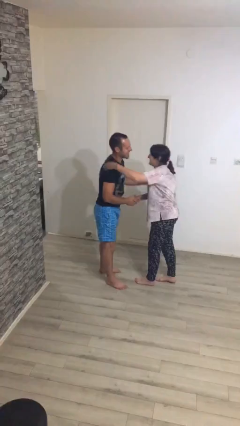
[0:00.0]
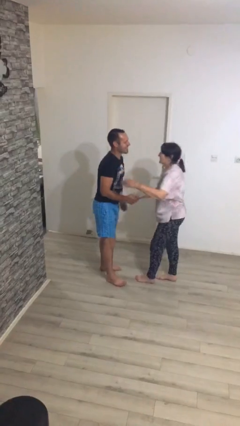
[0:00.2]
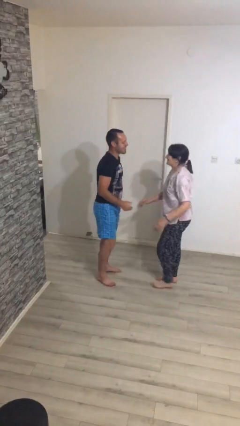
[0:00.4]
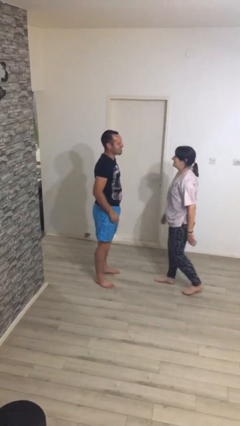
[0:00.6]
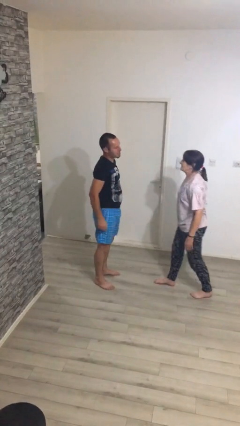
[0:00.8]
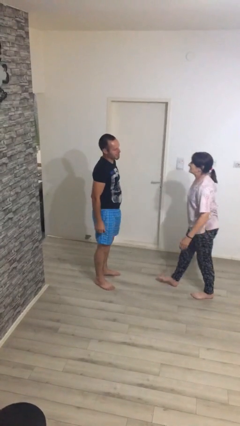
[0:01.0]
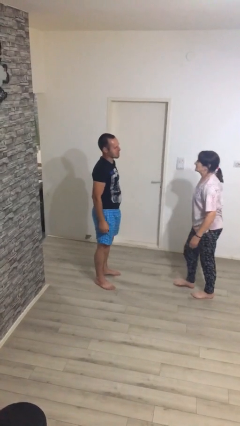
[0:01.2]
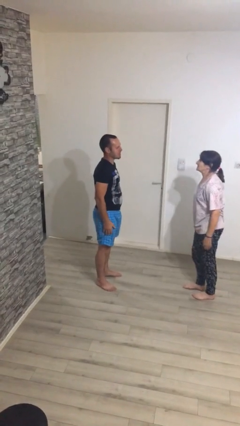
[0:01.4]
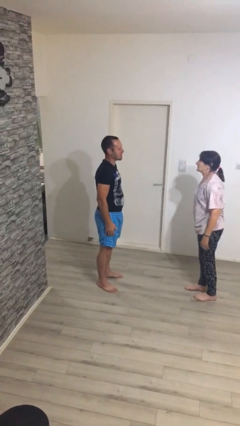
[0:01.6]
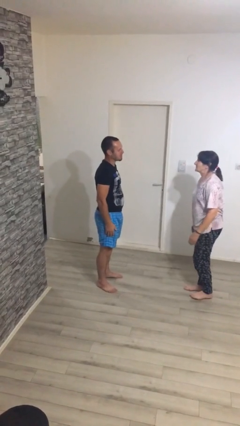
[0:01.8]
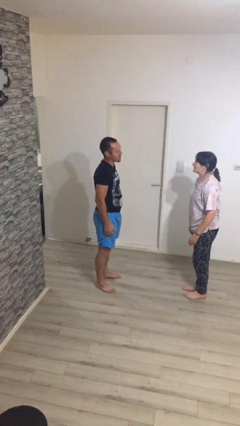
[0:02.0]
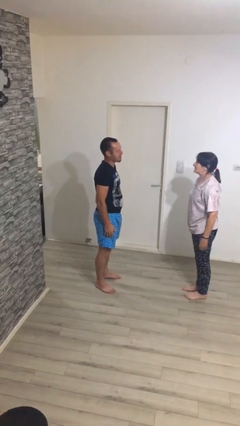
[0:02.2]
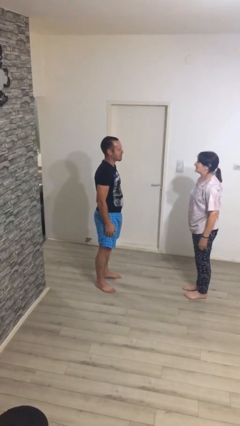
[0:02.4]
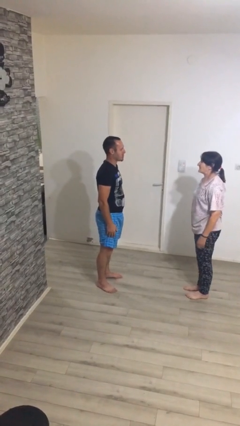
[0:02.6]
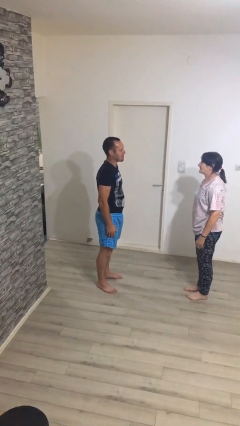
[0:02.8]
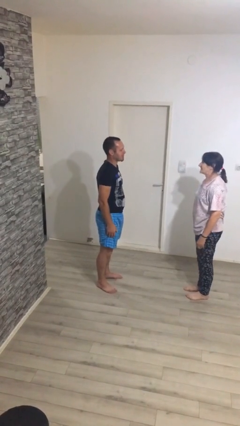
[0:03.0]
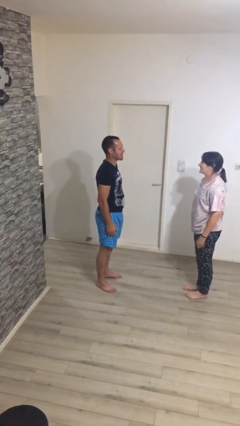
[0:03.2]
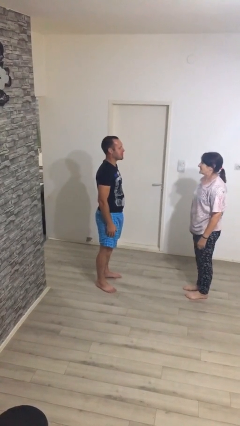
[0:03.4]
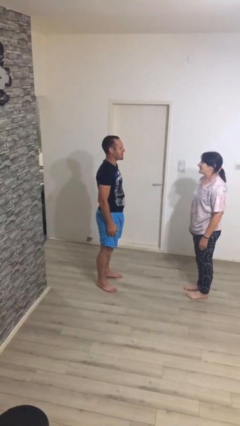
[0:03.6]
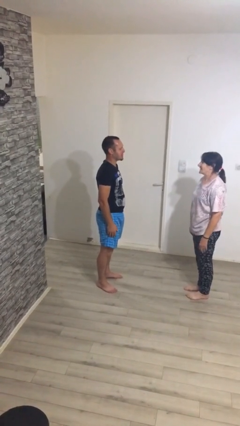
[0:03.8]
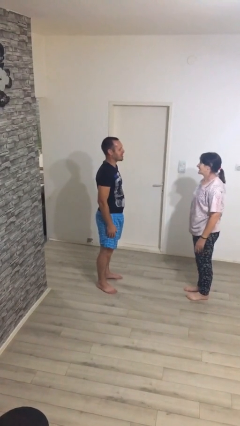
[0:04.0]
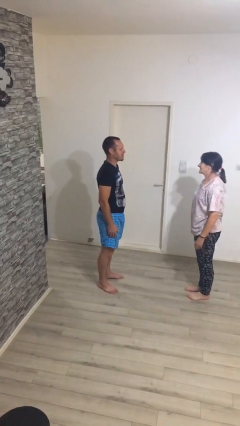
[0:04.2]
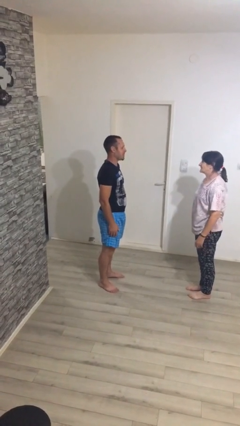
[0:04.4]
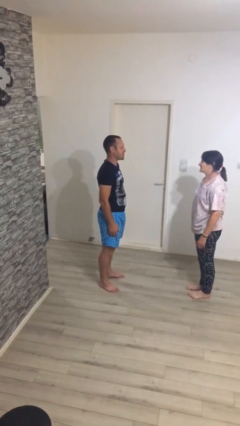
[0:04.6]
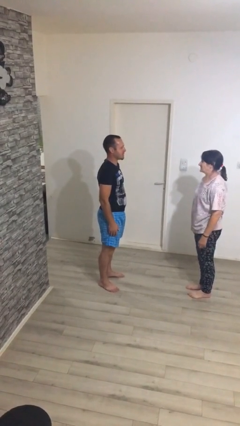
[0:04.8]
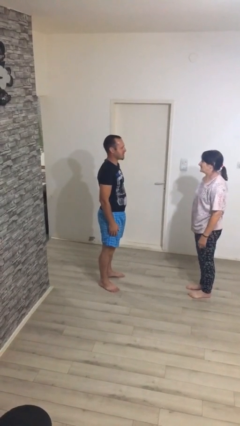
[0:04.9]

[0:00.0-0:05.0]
person talks to person

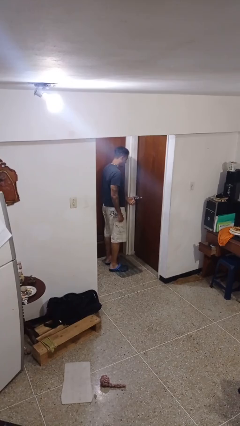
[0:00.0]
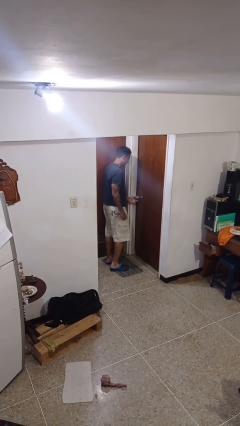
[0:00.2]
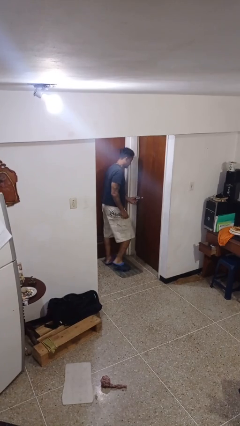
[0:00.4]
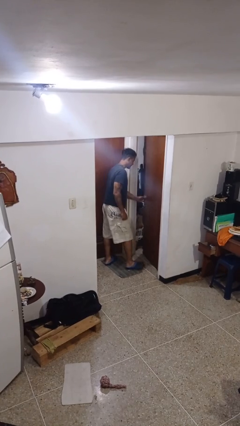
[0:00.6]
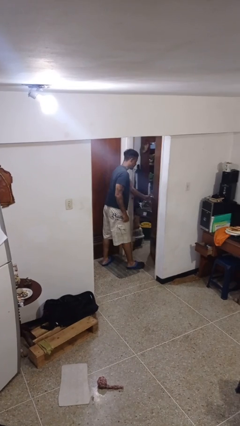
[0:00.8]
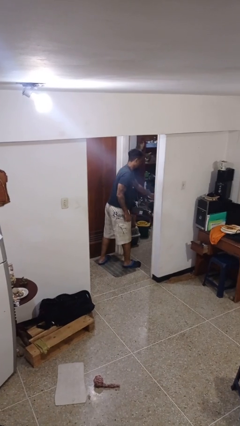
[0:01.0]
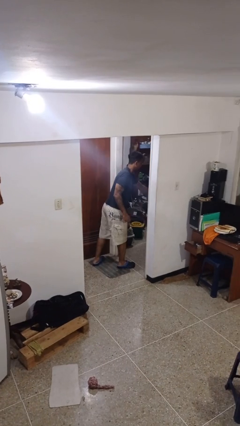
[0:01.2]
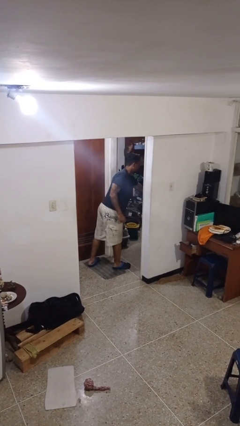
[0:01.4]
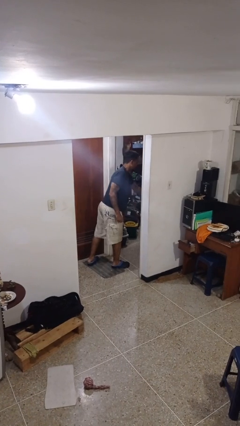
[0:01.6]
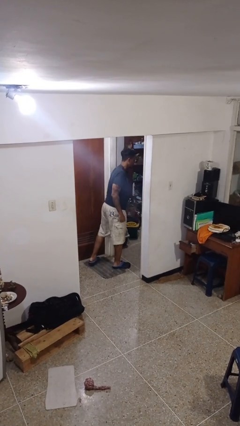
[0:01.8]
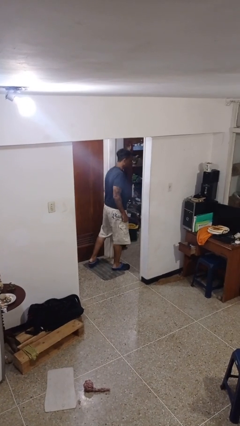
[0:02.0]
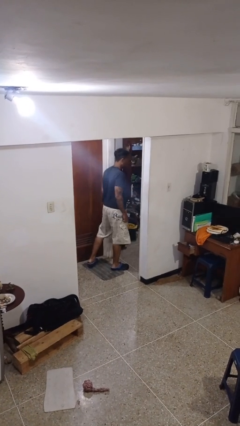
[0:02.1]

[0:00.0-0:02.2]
person opens facility door

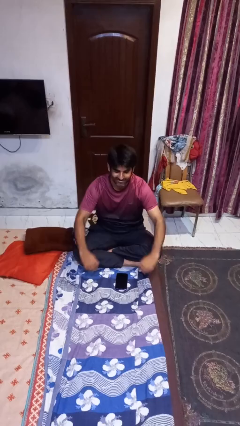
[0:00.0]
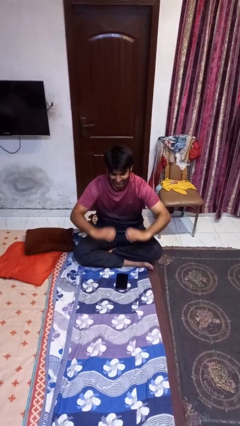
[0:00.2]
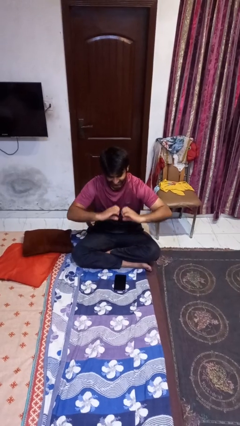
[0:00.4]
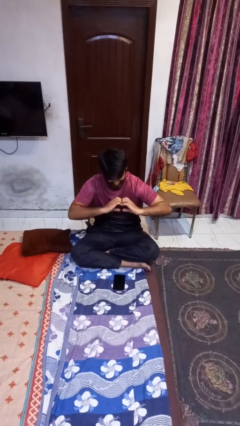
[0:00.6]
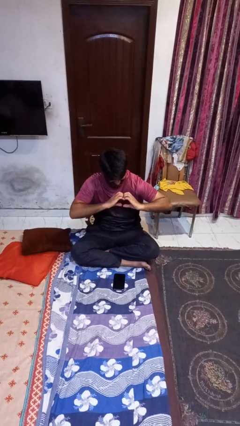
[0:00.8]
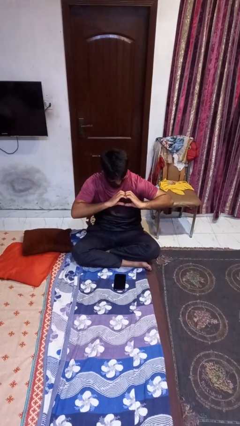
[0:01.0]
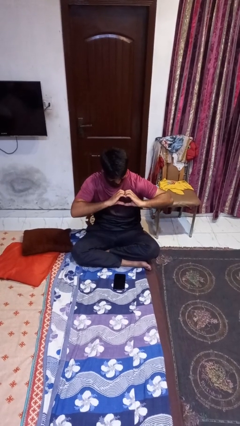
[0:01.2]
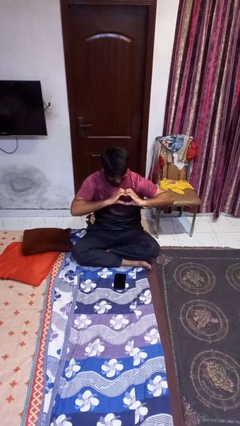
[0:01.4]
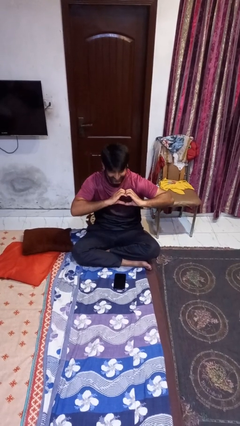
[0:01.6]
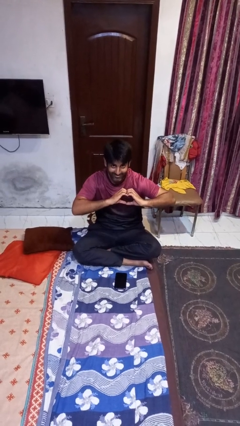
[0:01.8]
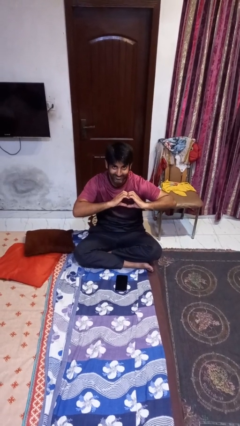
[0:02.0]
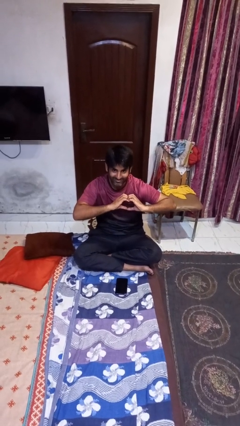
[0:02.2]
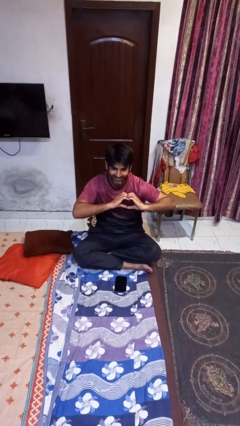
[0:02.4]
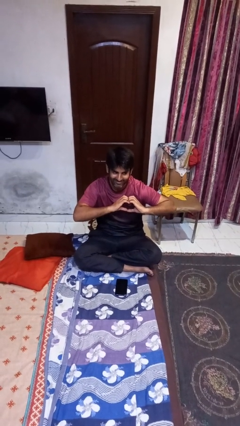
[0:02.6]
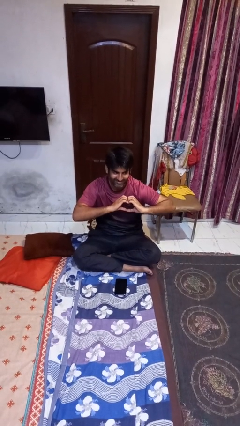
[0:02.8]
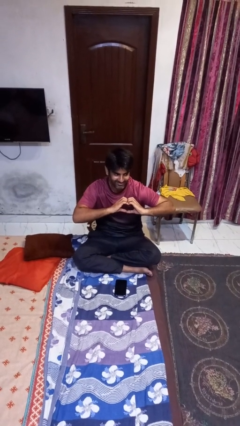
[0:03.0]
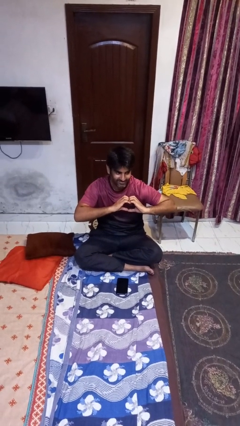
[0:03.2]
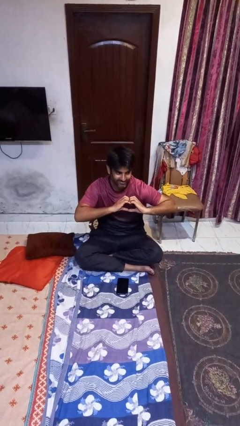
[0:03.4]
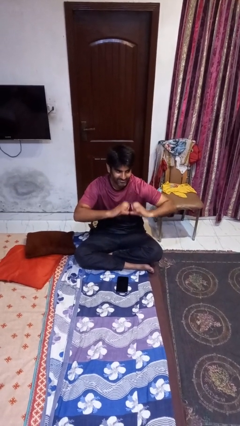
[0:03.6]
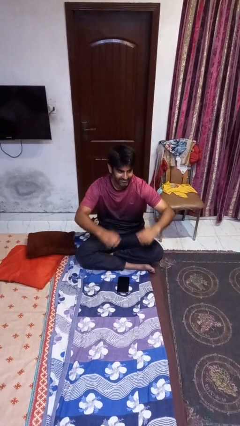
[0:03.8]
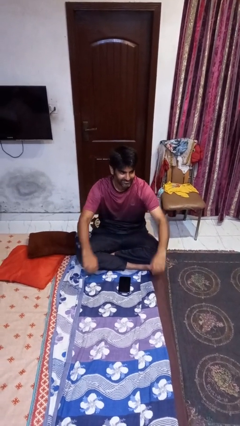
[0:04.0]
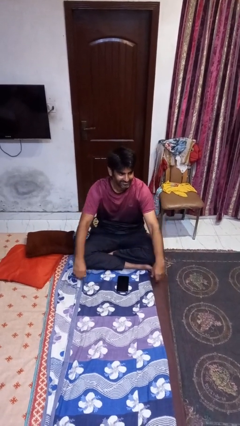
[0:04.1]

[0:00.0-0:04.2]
person gestures heart

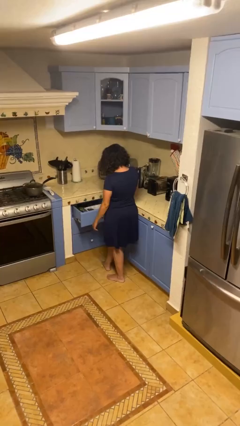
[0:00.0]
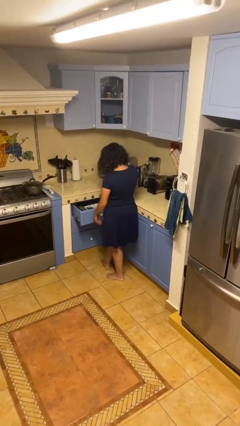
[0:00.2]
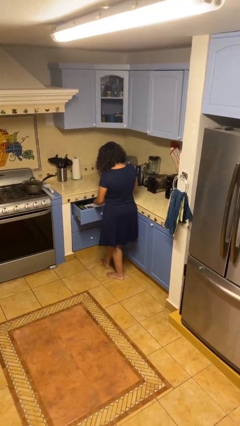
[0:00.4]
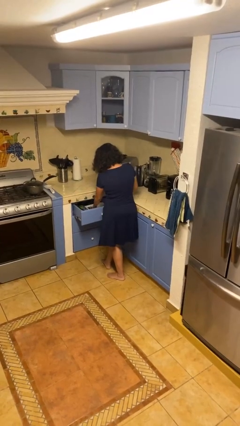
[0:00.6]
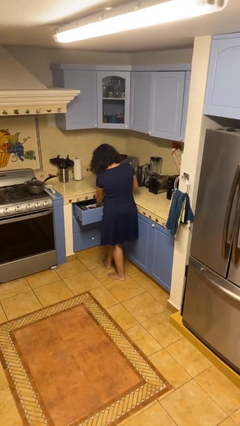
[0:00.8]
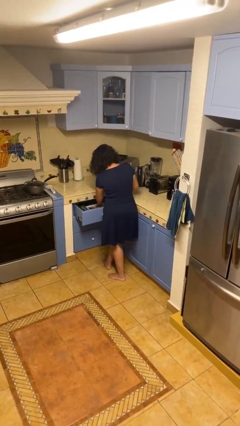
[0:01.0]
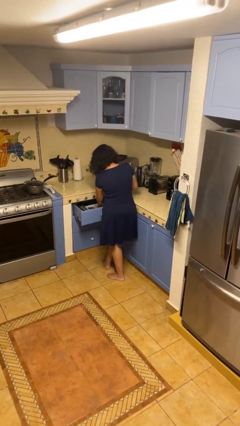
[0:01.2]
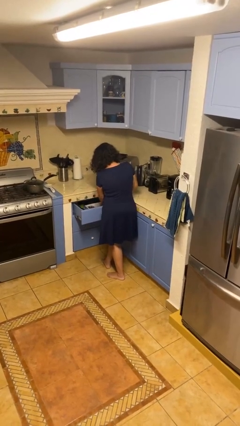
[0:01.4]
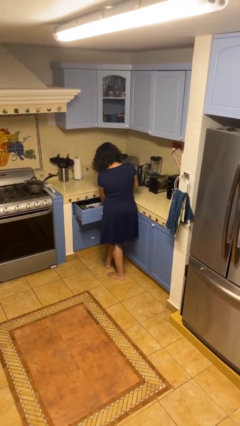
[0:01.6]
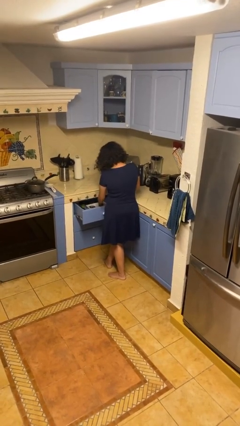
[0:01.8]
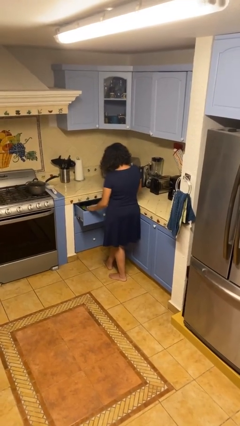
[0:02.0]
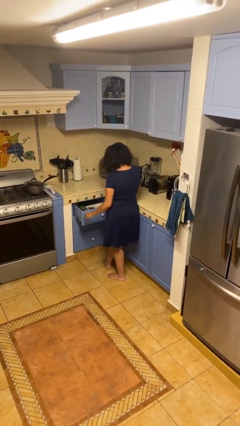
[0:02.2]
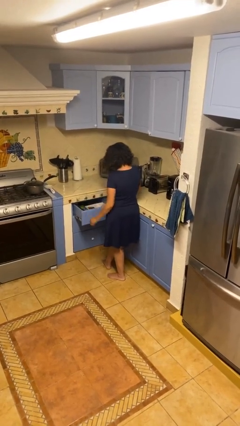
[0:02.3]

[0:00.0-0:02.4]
person searches in kitchen drawer

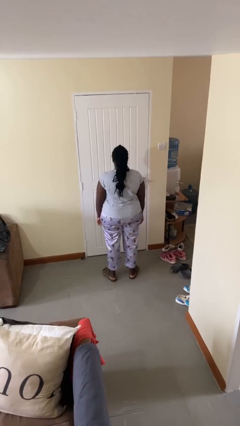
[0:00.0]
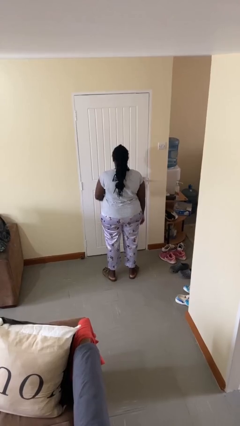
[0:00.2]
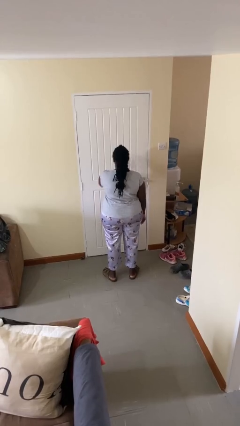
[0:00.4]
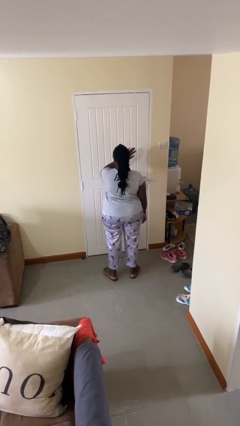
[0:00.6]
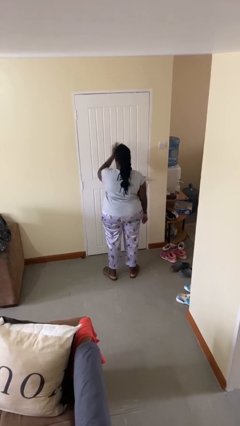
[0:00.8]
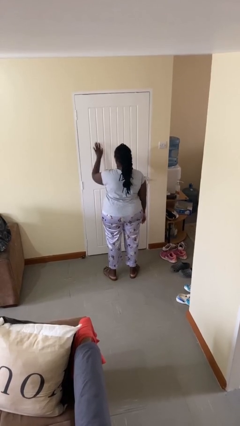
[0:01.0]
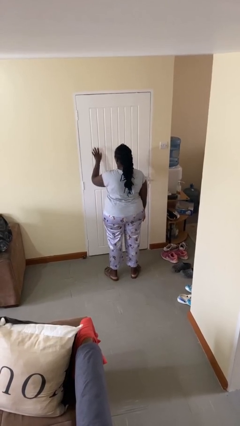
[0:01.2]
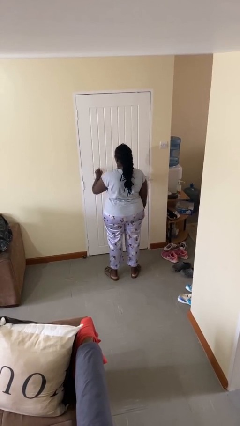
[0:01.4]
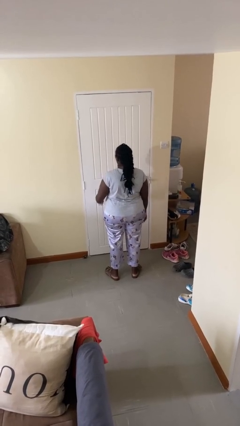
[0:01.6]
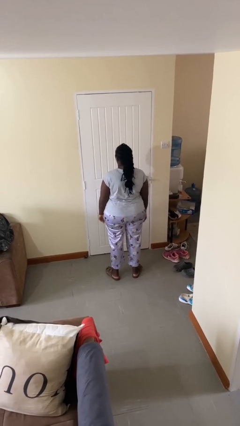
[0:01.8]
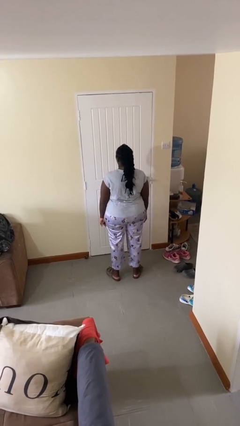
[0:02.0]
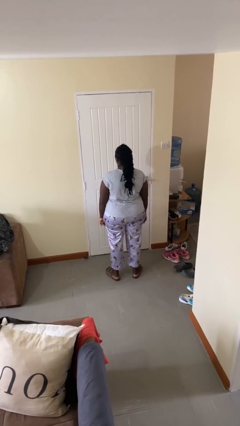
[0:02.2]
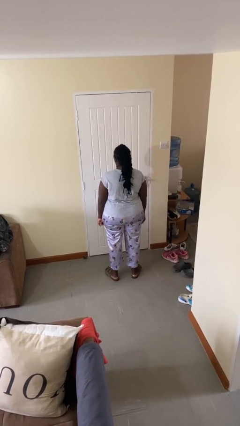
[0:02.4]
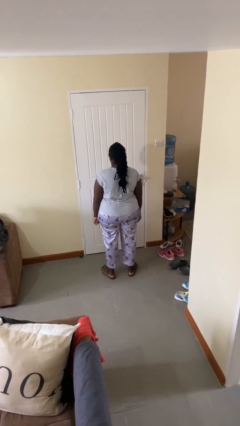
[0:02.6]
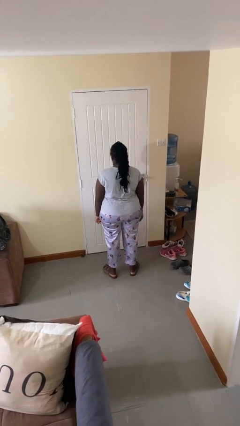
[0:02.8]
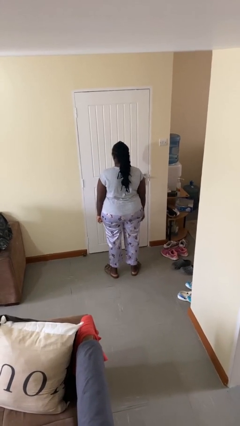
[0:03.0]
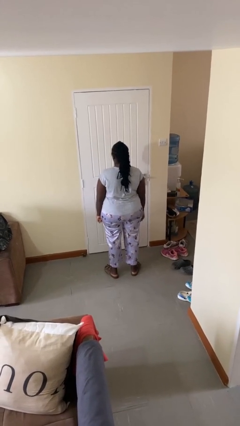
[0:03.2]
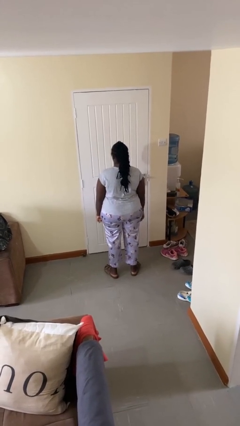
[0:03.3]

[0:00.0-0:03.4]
person gestures swipe left

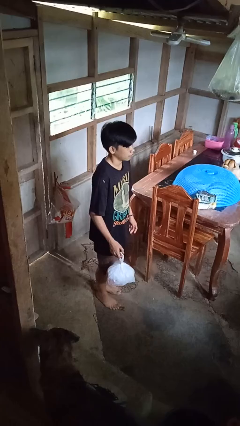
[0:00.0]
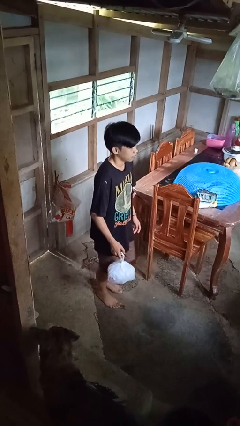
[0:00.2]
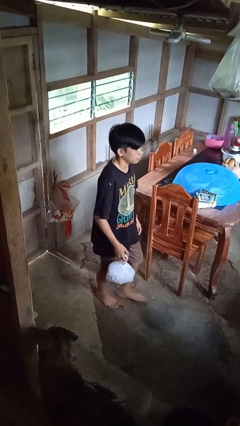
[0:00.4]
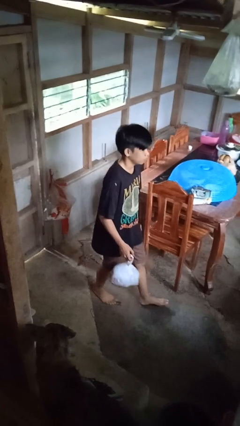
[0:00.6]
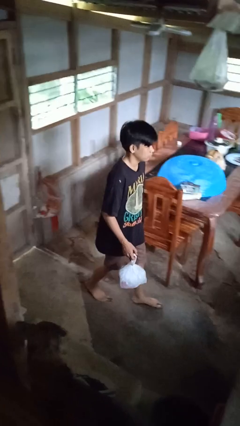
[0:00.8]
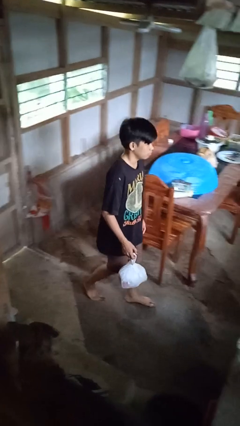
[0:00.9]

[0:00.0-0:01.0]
person carries groceries
